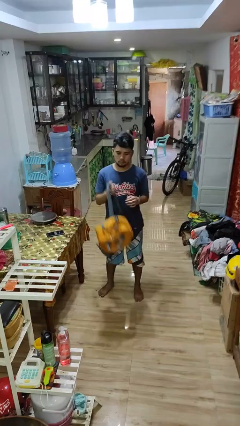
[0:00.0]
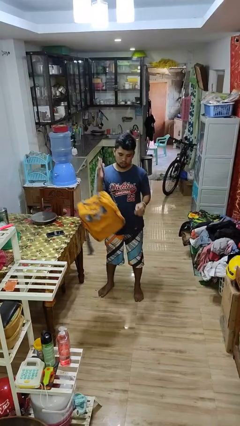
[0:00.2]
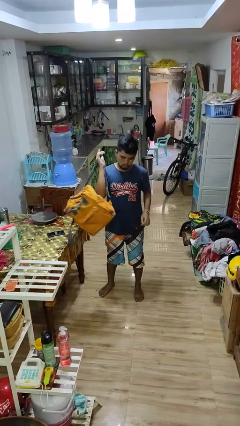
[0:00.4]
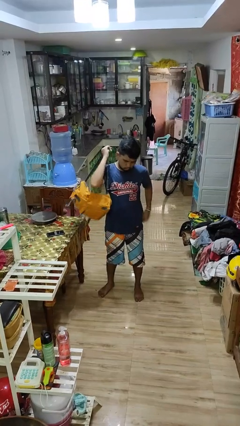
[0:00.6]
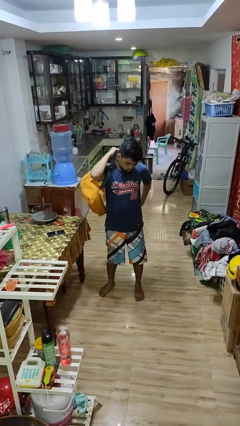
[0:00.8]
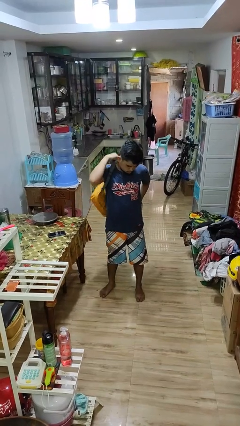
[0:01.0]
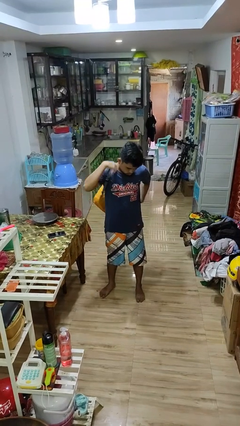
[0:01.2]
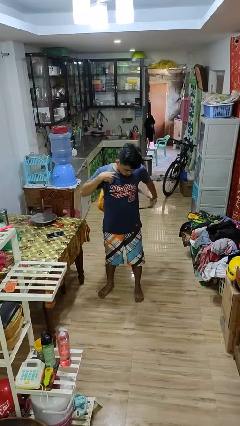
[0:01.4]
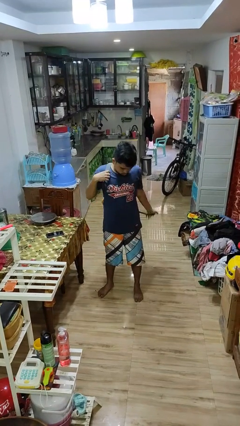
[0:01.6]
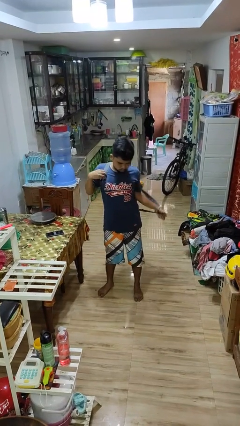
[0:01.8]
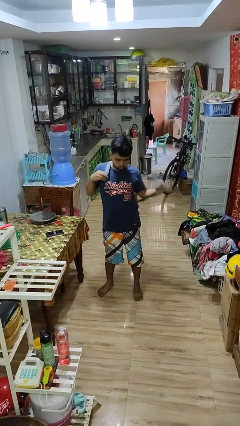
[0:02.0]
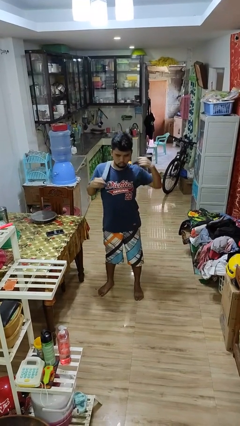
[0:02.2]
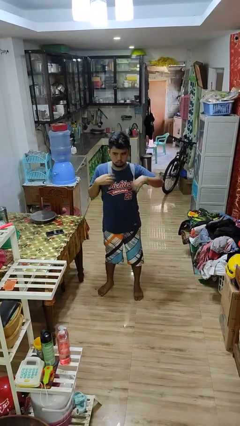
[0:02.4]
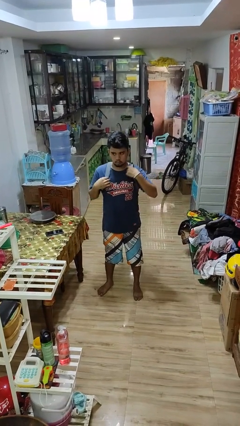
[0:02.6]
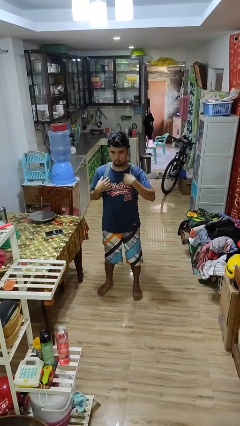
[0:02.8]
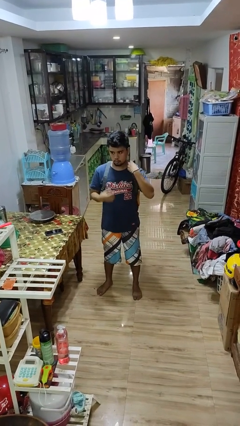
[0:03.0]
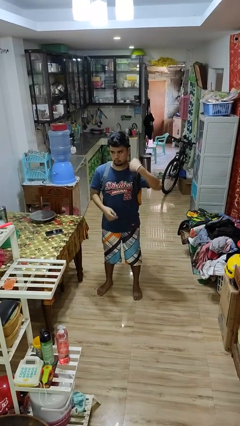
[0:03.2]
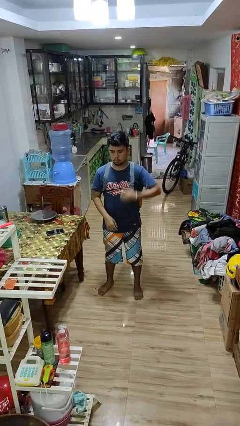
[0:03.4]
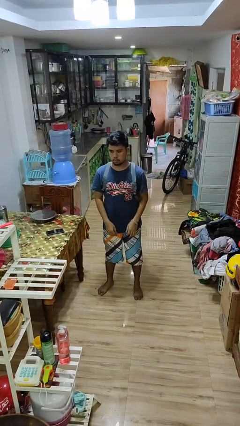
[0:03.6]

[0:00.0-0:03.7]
person puts on backpack

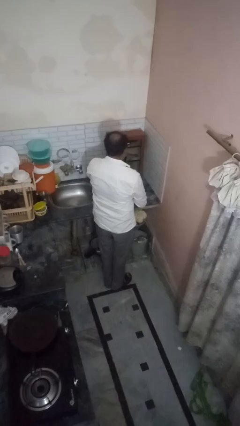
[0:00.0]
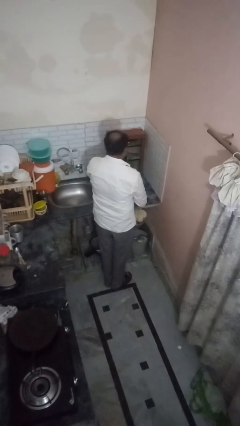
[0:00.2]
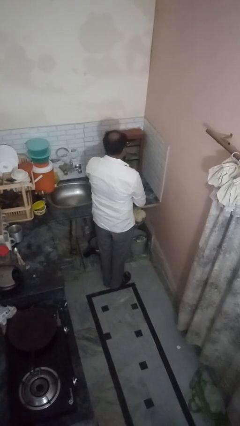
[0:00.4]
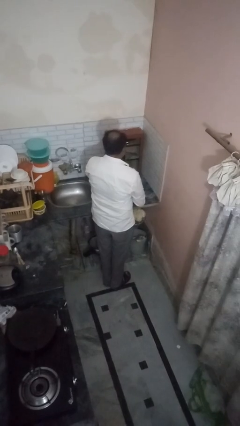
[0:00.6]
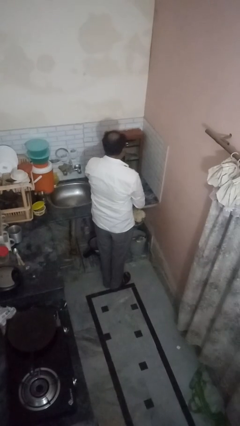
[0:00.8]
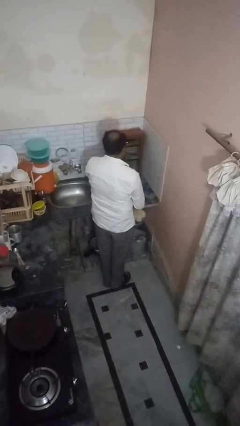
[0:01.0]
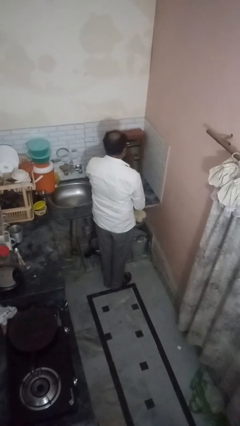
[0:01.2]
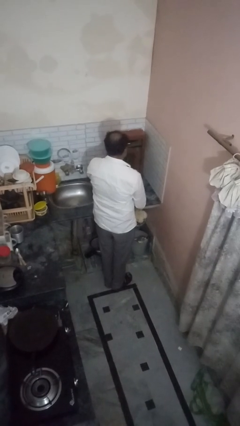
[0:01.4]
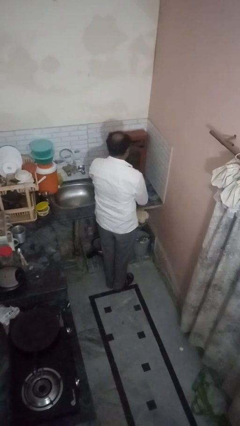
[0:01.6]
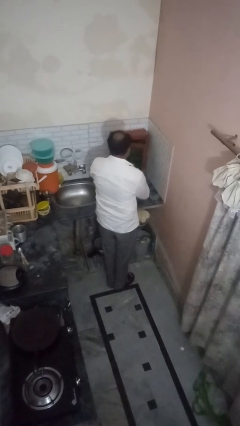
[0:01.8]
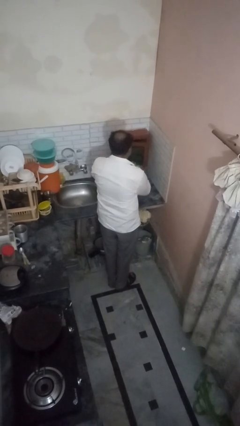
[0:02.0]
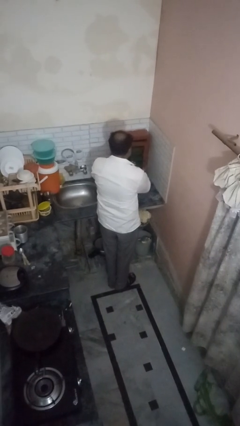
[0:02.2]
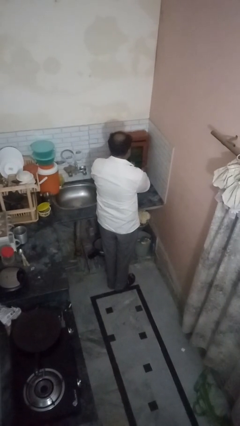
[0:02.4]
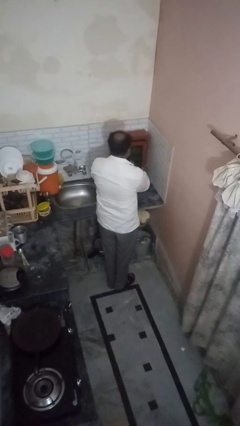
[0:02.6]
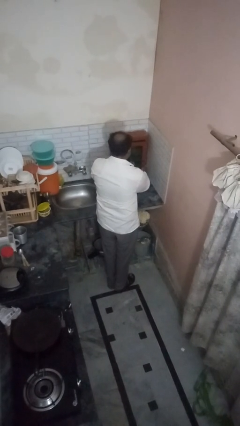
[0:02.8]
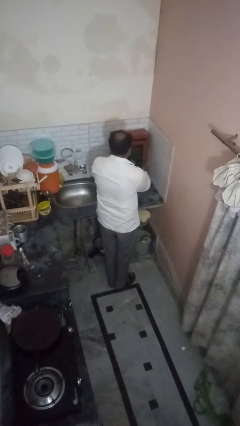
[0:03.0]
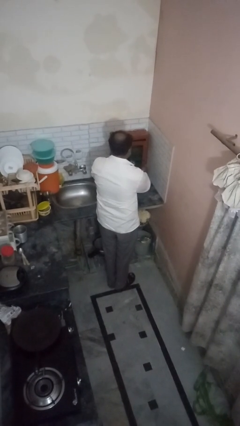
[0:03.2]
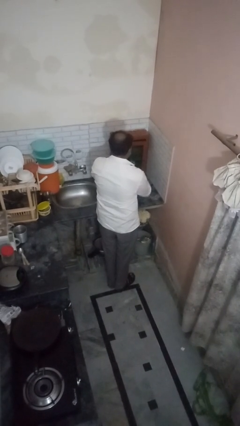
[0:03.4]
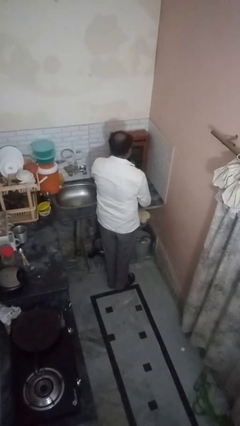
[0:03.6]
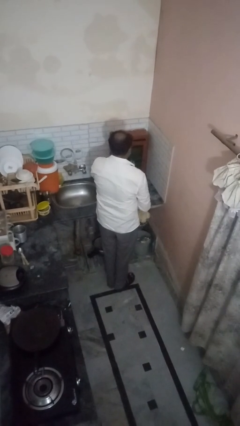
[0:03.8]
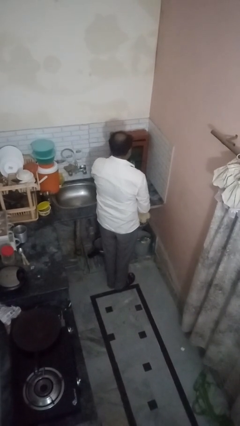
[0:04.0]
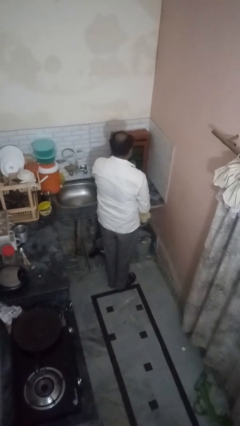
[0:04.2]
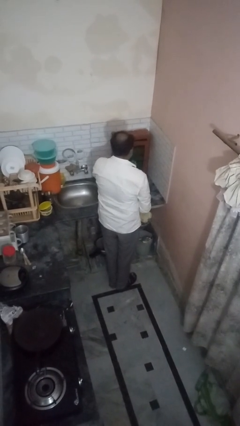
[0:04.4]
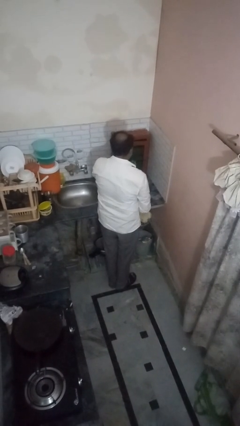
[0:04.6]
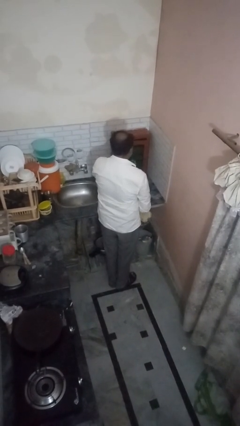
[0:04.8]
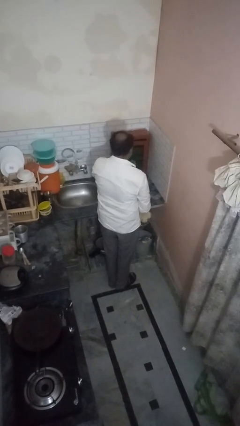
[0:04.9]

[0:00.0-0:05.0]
person closes kitchen drawer

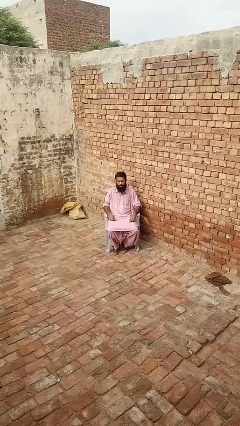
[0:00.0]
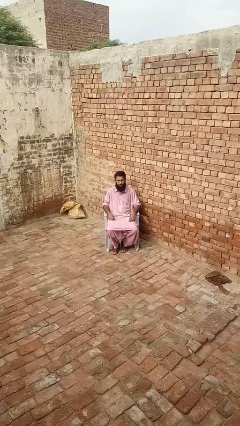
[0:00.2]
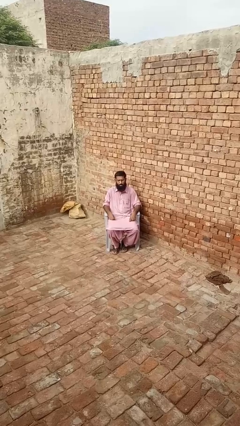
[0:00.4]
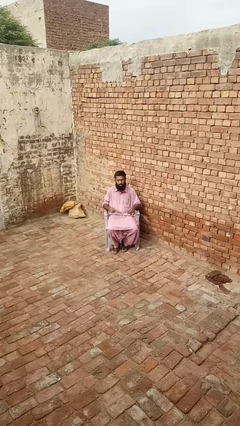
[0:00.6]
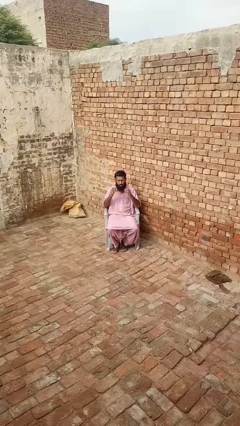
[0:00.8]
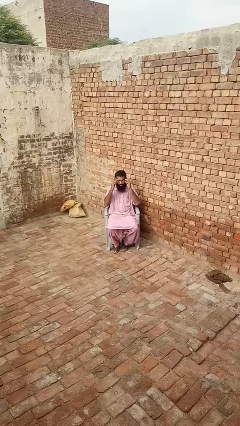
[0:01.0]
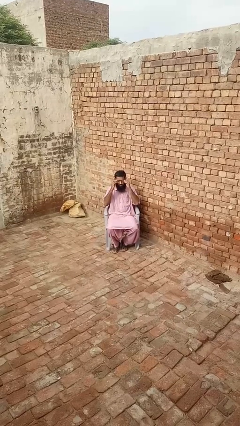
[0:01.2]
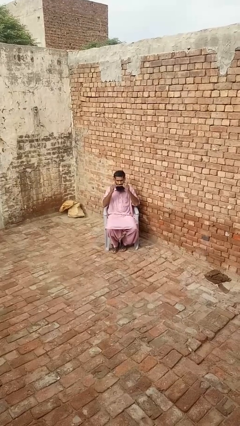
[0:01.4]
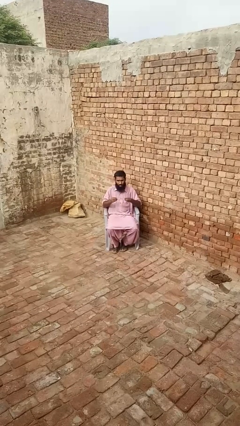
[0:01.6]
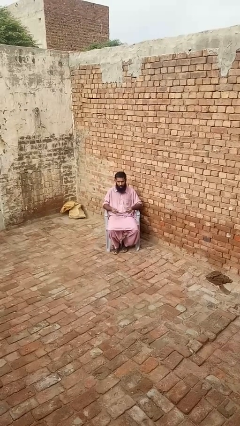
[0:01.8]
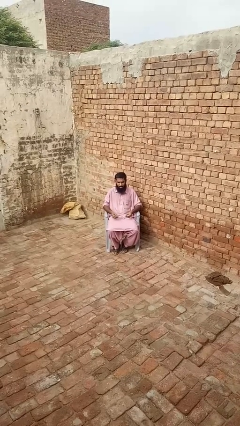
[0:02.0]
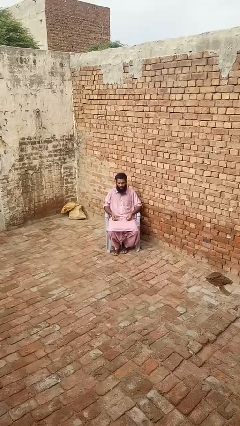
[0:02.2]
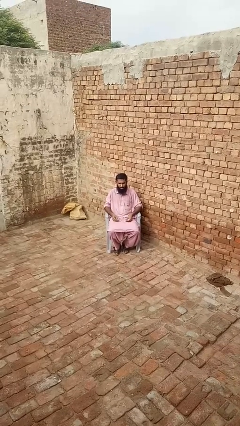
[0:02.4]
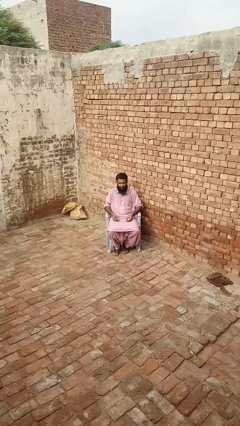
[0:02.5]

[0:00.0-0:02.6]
person takes off glasses

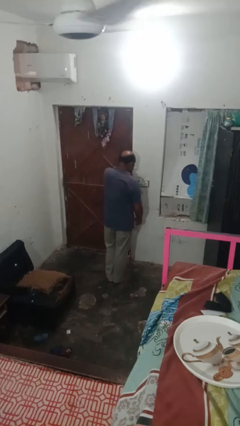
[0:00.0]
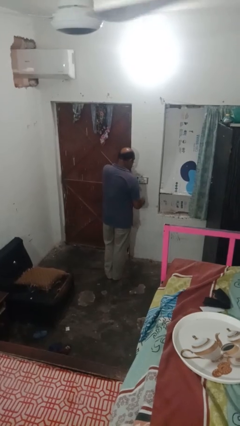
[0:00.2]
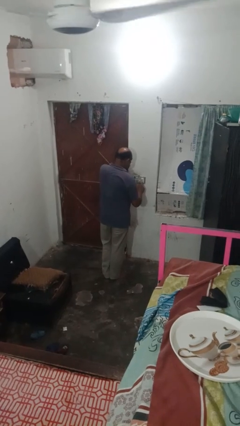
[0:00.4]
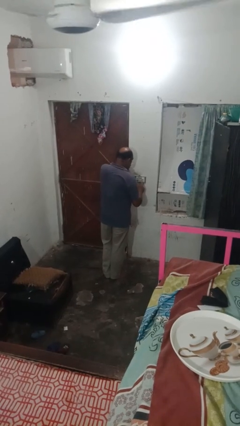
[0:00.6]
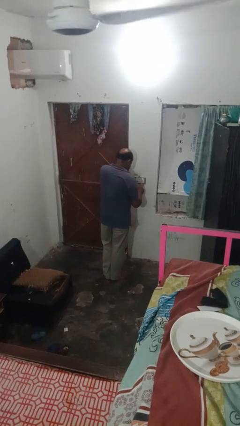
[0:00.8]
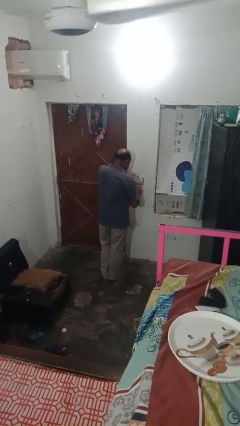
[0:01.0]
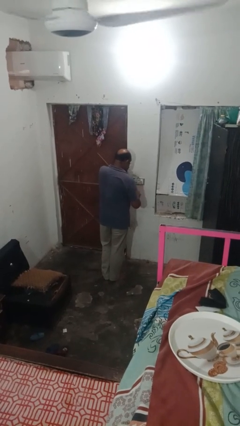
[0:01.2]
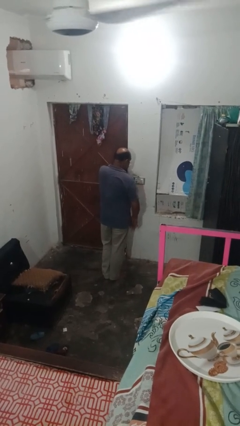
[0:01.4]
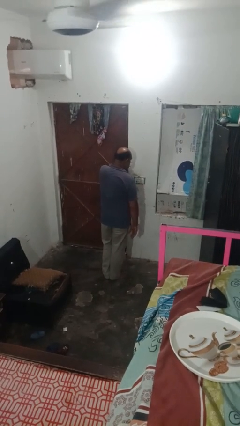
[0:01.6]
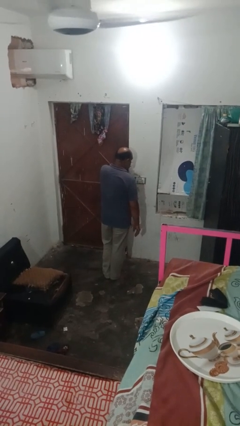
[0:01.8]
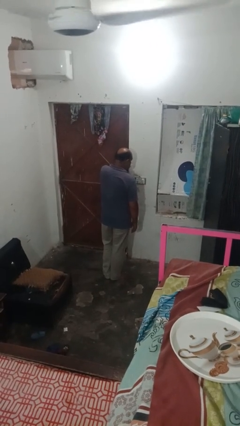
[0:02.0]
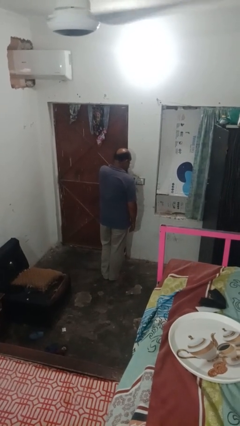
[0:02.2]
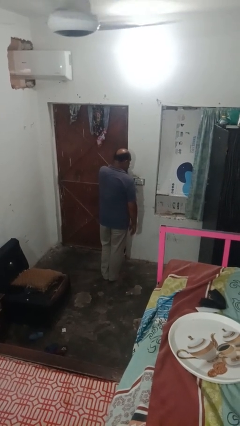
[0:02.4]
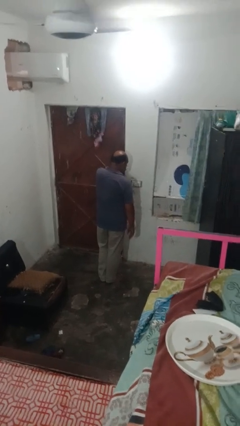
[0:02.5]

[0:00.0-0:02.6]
person turns off fan

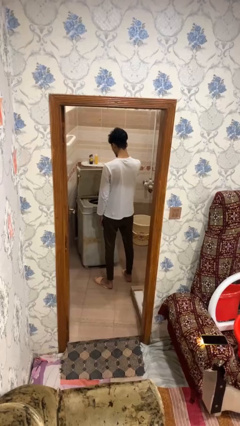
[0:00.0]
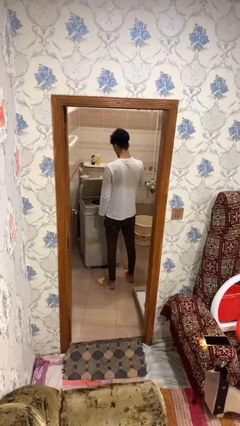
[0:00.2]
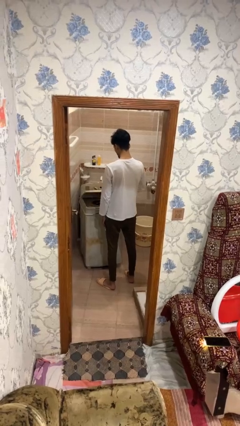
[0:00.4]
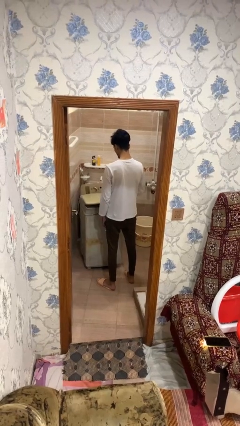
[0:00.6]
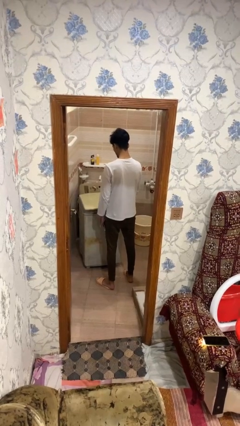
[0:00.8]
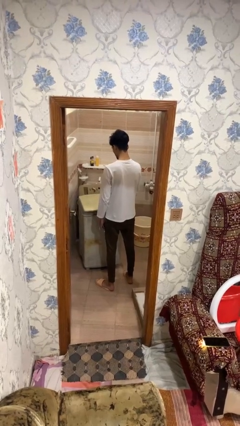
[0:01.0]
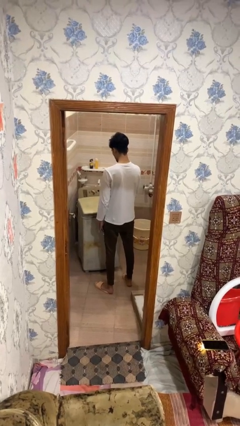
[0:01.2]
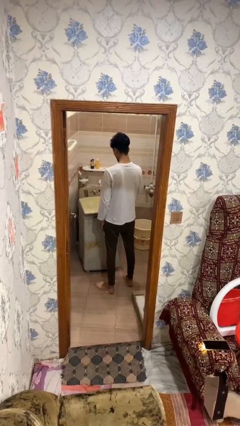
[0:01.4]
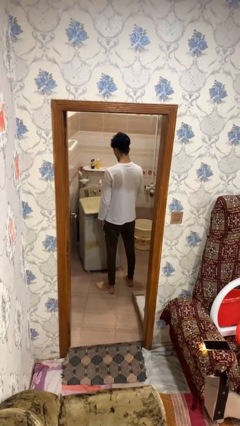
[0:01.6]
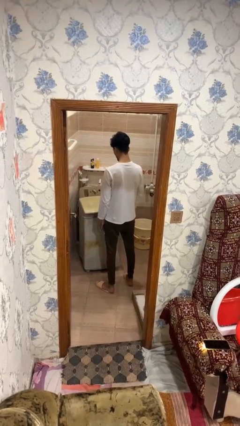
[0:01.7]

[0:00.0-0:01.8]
person closes clothes washer

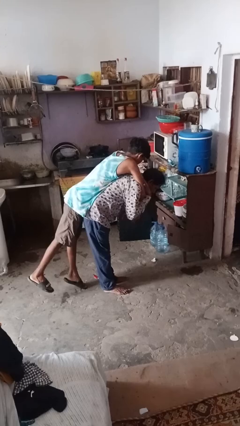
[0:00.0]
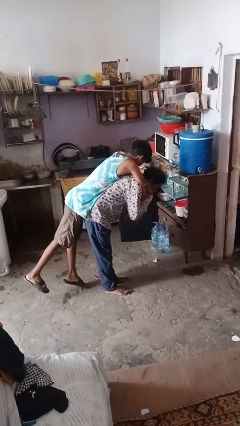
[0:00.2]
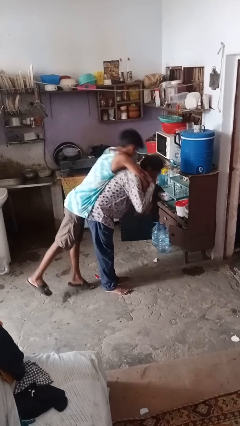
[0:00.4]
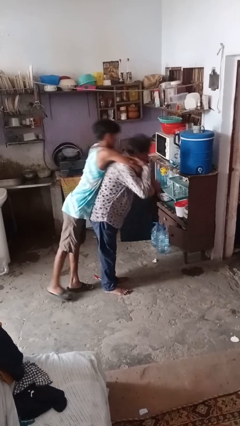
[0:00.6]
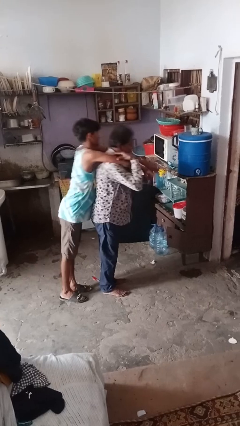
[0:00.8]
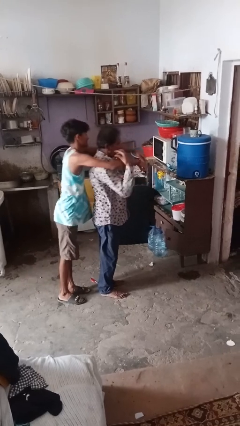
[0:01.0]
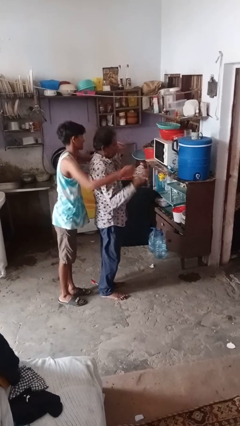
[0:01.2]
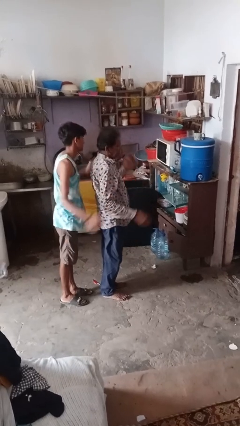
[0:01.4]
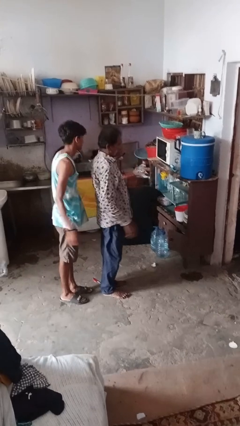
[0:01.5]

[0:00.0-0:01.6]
person puts down person

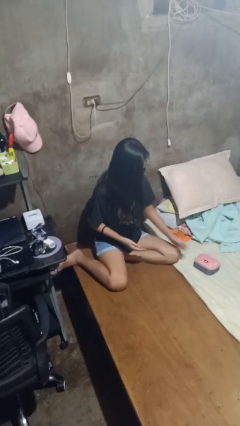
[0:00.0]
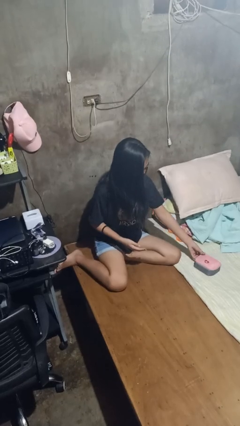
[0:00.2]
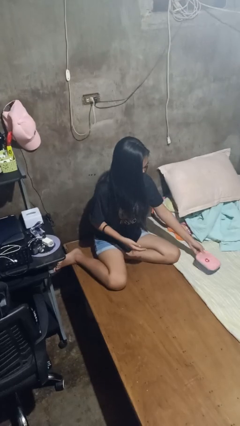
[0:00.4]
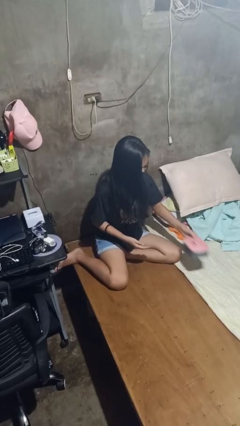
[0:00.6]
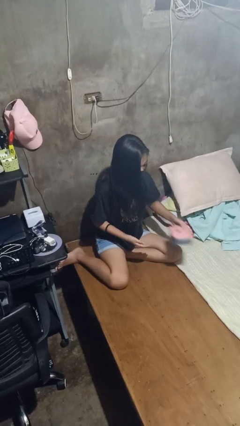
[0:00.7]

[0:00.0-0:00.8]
person picks up object from bed
